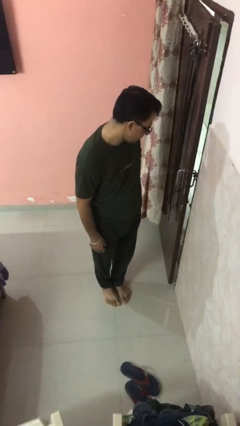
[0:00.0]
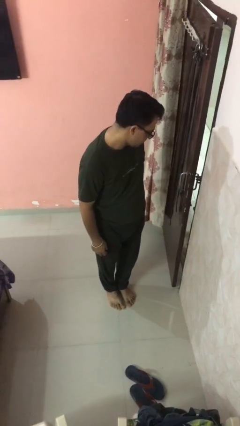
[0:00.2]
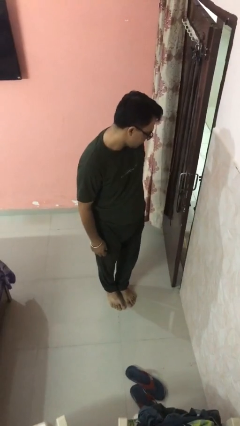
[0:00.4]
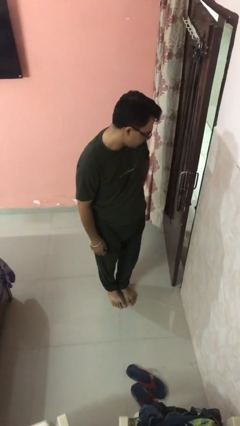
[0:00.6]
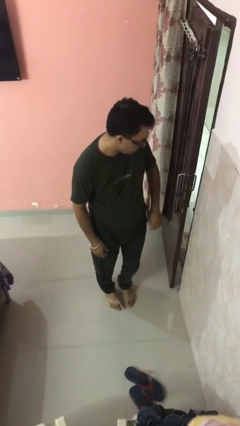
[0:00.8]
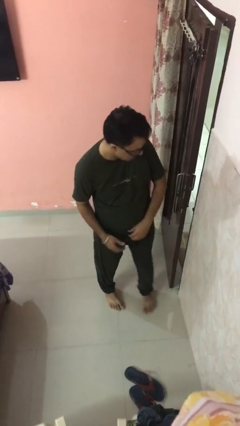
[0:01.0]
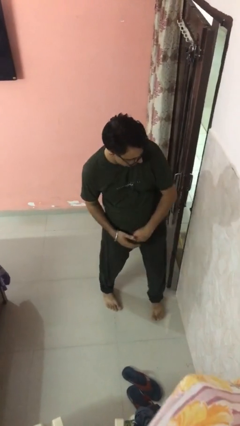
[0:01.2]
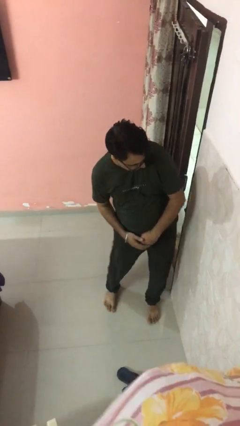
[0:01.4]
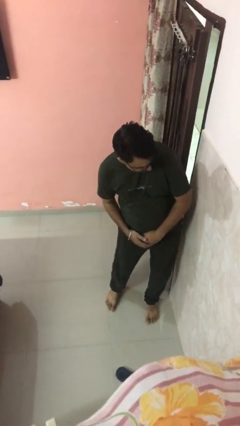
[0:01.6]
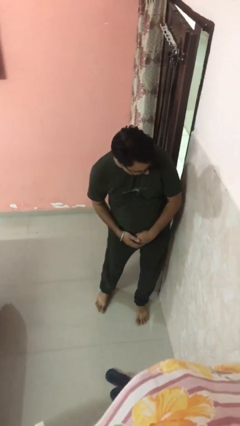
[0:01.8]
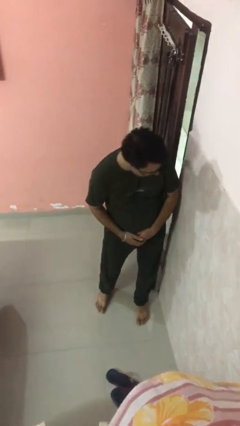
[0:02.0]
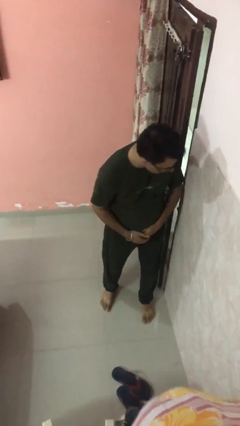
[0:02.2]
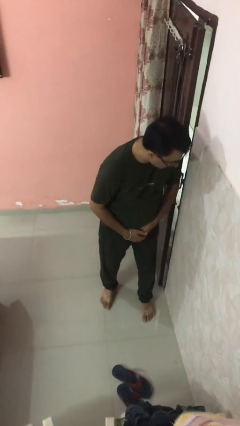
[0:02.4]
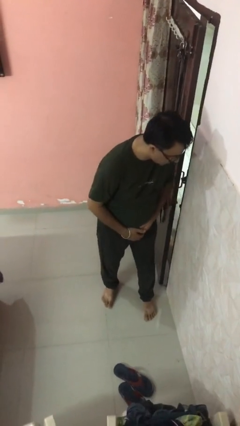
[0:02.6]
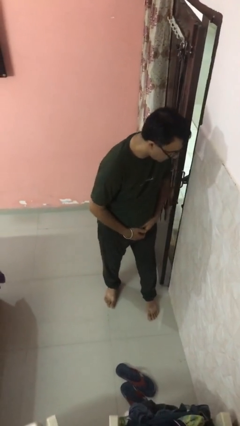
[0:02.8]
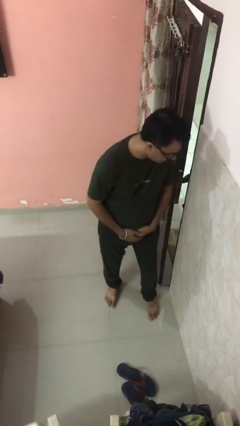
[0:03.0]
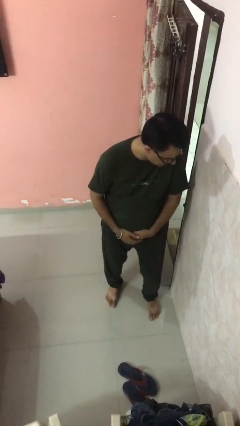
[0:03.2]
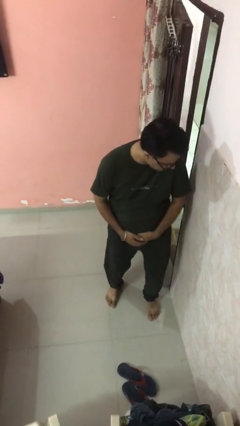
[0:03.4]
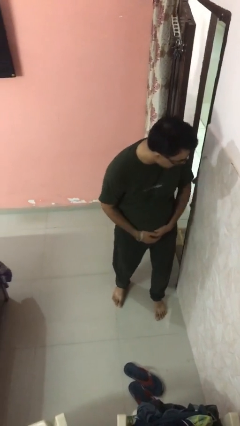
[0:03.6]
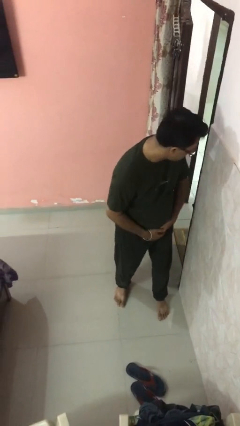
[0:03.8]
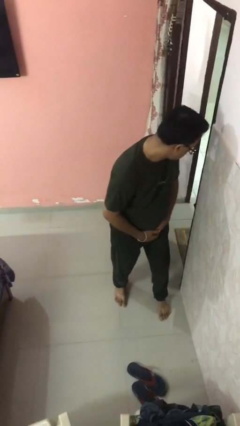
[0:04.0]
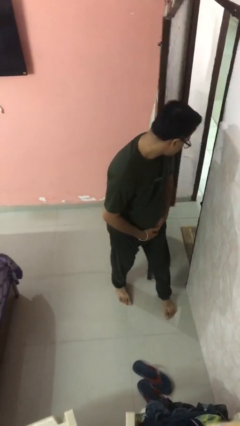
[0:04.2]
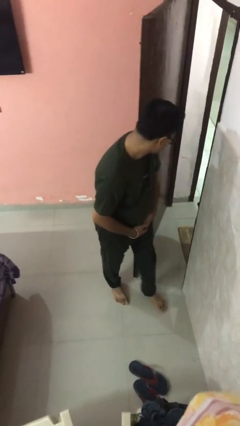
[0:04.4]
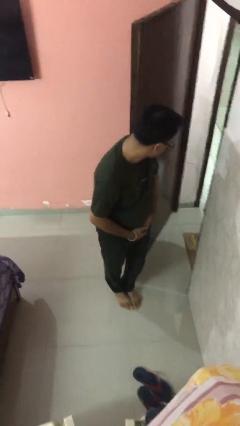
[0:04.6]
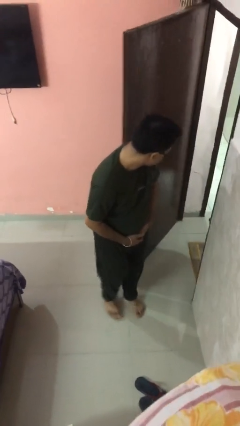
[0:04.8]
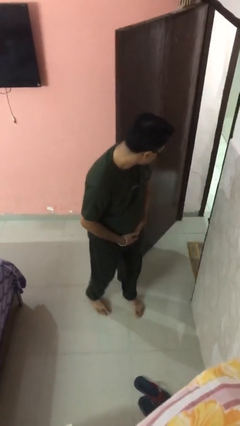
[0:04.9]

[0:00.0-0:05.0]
person opens facility door

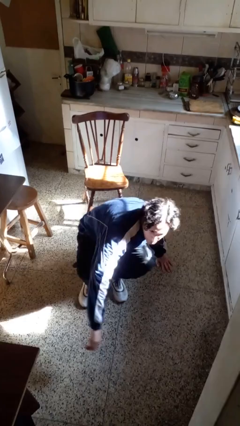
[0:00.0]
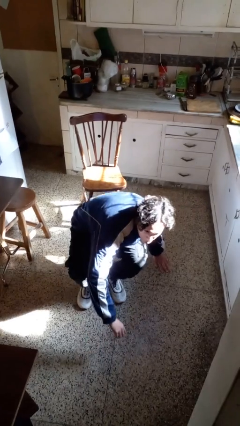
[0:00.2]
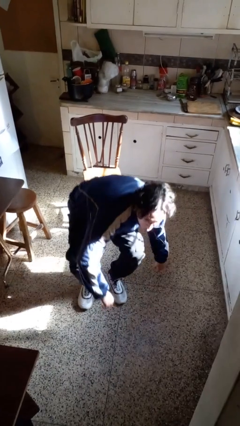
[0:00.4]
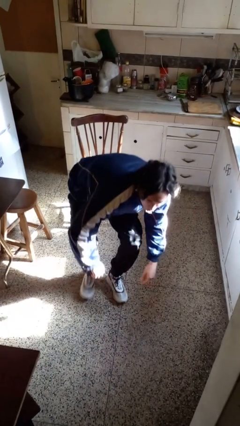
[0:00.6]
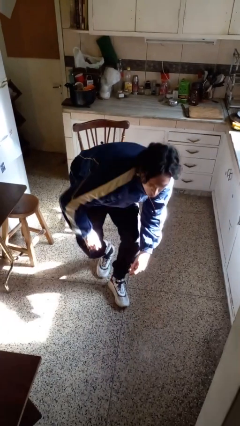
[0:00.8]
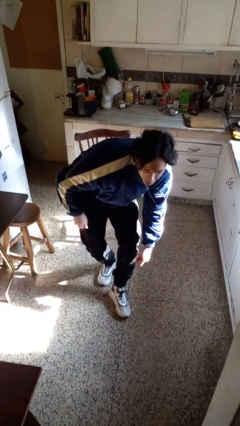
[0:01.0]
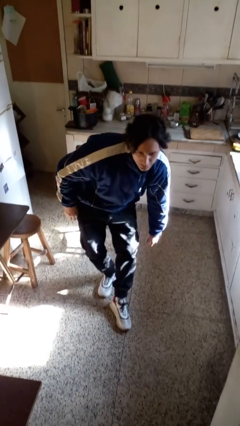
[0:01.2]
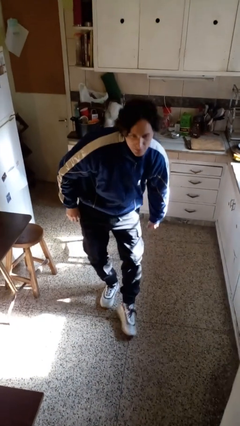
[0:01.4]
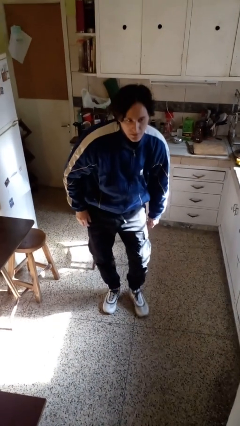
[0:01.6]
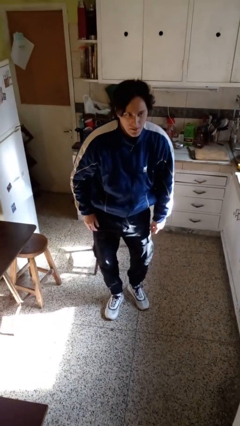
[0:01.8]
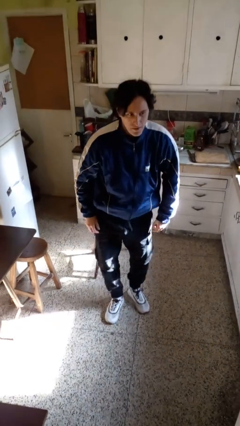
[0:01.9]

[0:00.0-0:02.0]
person stands up from floor

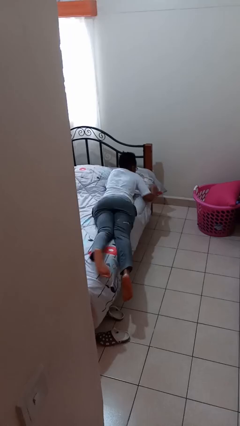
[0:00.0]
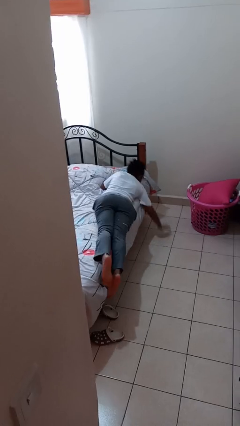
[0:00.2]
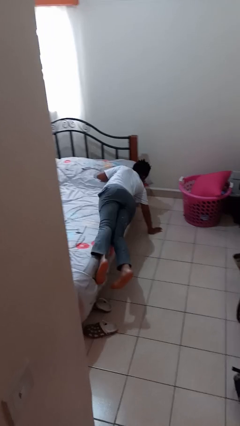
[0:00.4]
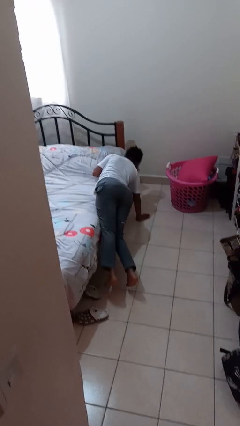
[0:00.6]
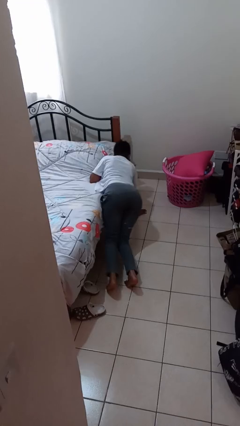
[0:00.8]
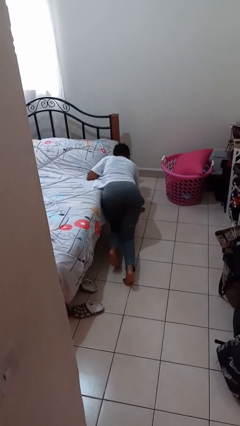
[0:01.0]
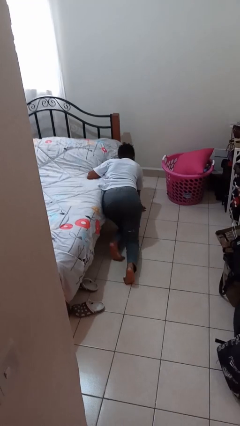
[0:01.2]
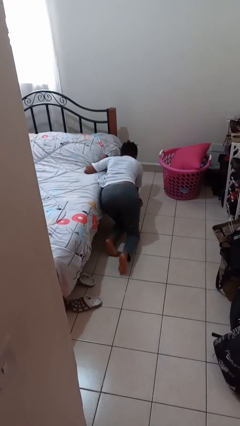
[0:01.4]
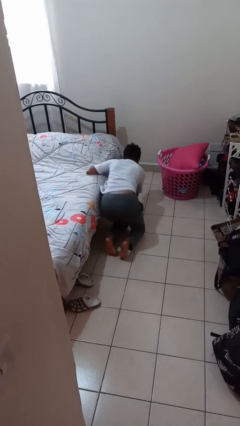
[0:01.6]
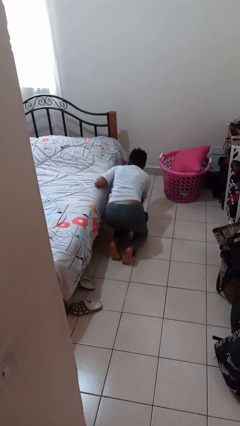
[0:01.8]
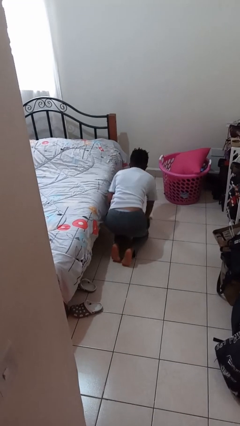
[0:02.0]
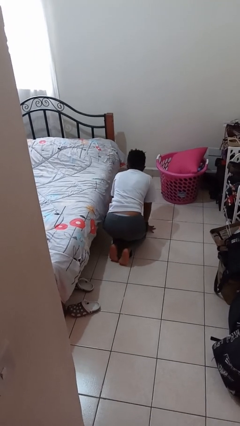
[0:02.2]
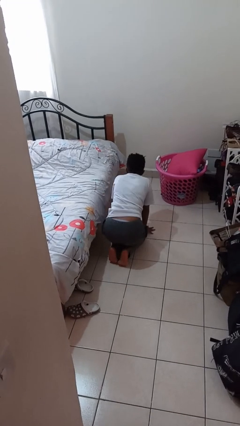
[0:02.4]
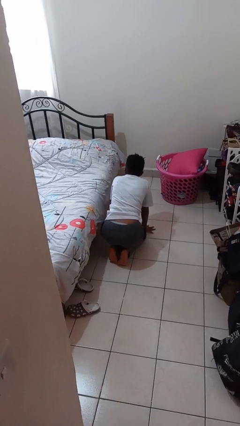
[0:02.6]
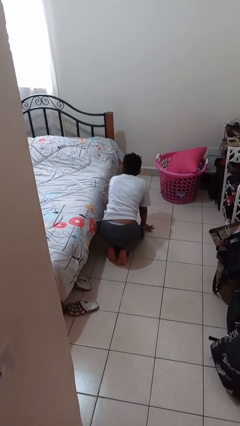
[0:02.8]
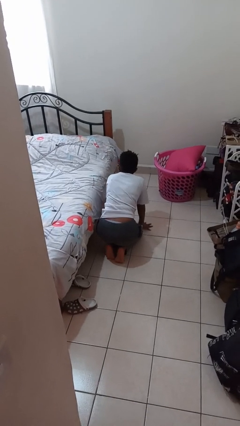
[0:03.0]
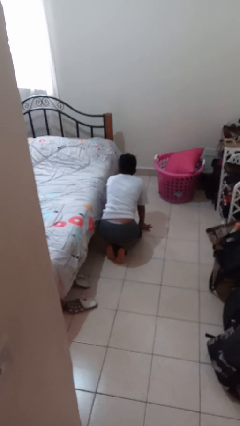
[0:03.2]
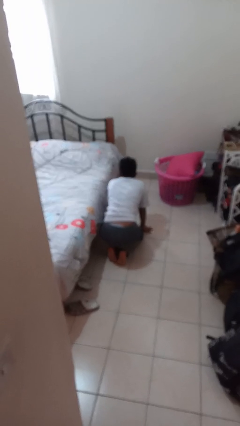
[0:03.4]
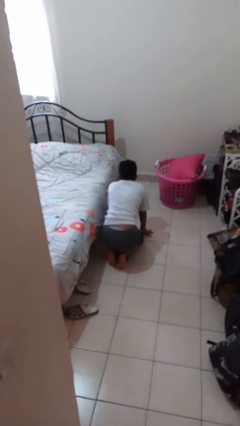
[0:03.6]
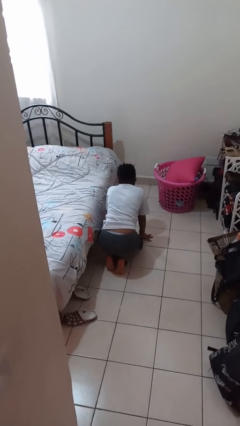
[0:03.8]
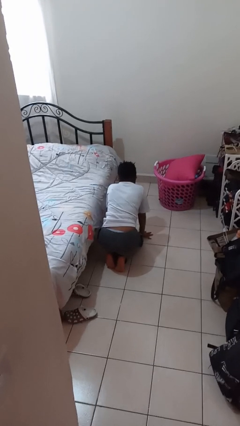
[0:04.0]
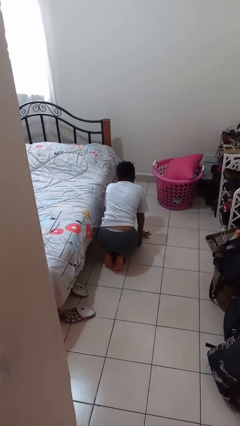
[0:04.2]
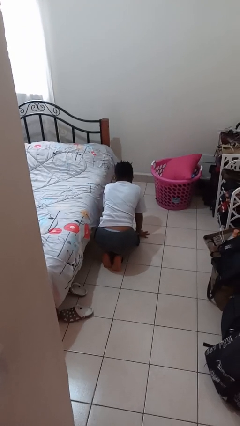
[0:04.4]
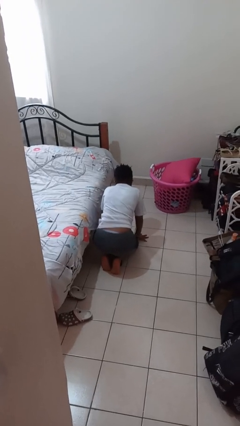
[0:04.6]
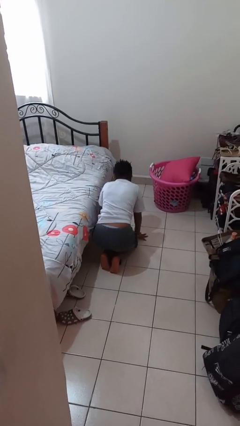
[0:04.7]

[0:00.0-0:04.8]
person falls from bed

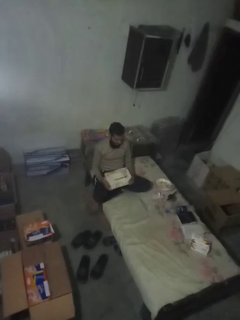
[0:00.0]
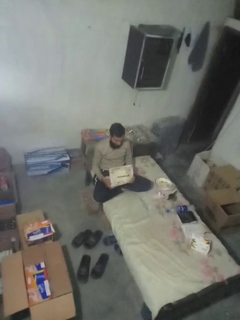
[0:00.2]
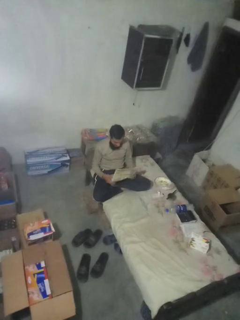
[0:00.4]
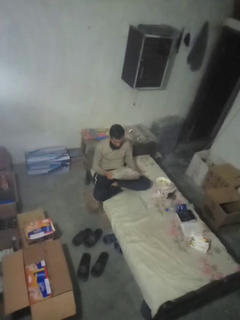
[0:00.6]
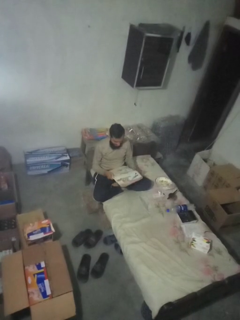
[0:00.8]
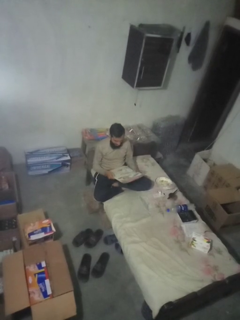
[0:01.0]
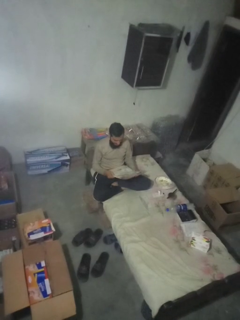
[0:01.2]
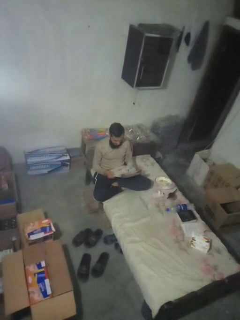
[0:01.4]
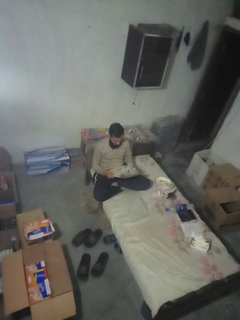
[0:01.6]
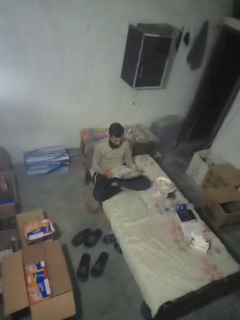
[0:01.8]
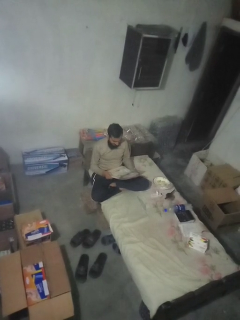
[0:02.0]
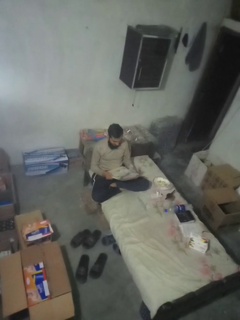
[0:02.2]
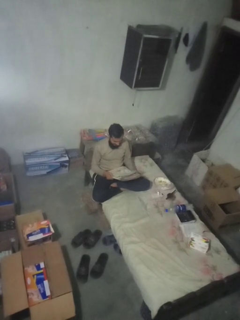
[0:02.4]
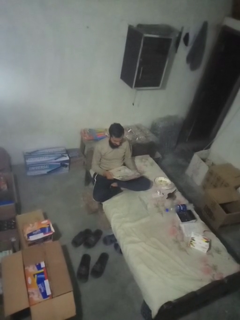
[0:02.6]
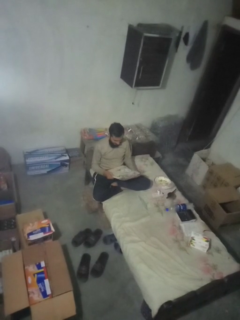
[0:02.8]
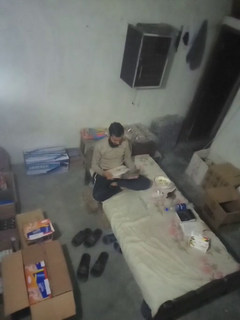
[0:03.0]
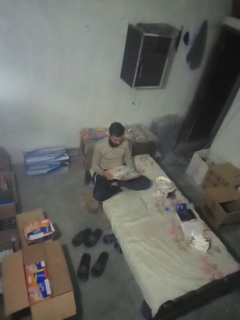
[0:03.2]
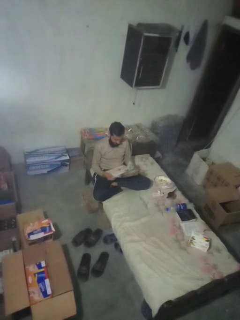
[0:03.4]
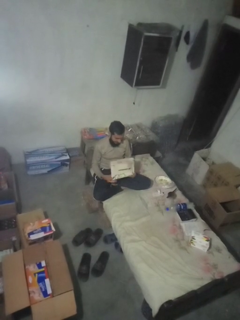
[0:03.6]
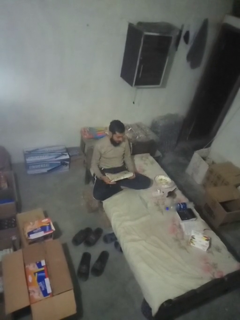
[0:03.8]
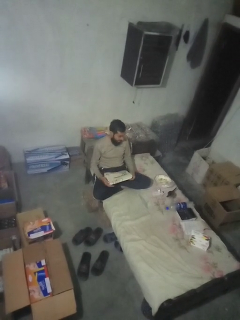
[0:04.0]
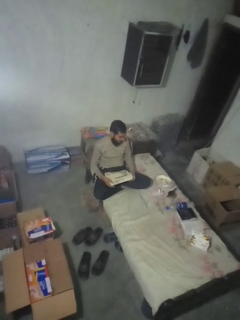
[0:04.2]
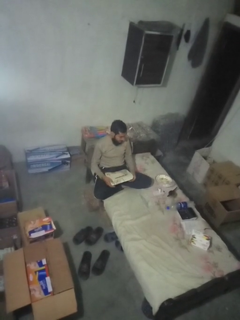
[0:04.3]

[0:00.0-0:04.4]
person reads magazine

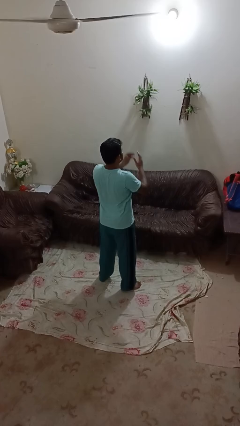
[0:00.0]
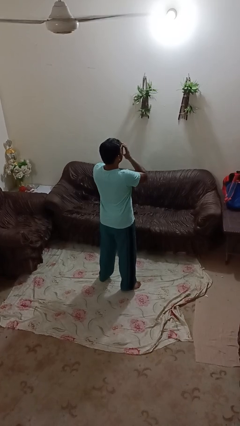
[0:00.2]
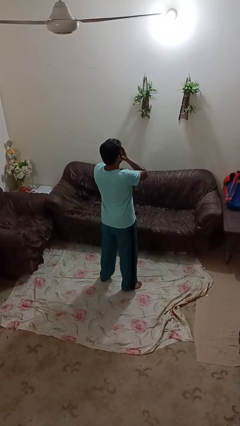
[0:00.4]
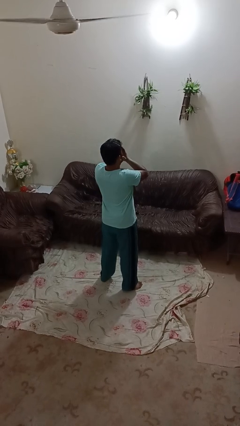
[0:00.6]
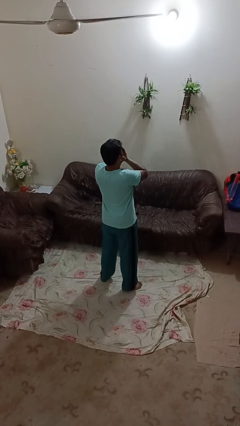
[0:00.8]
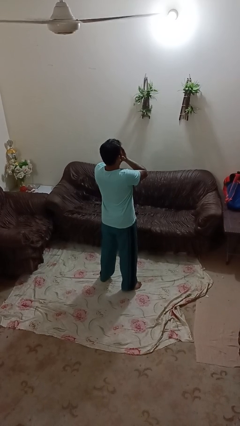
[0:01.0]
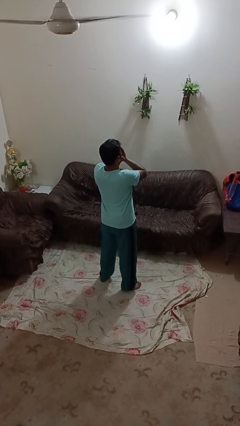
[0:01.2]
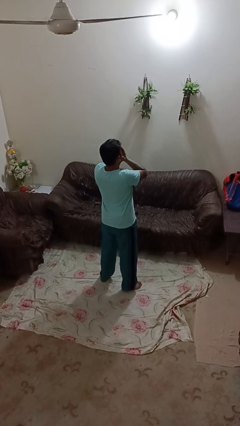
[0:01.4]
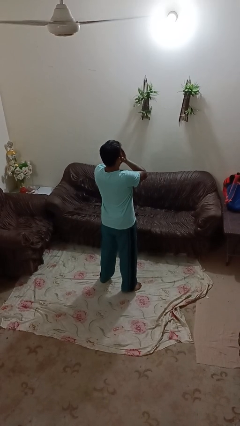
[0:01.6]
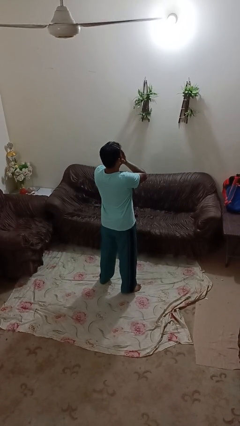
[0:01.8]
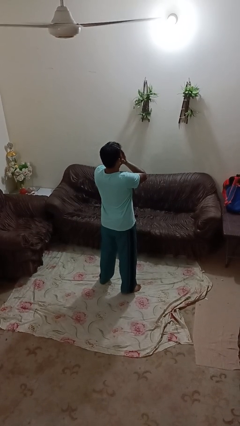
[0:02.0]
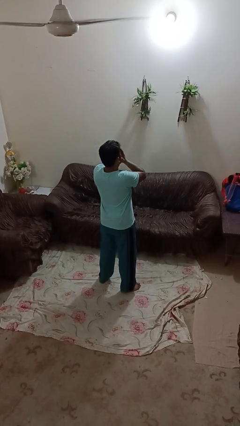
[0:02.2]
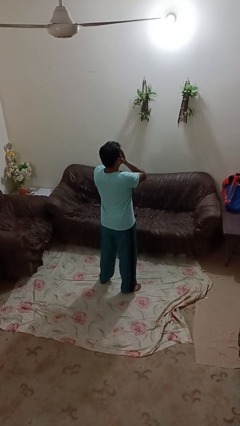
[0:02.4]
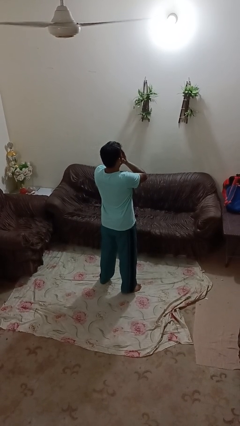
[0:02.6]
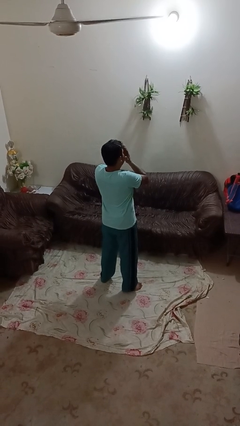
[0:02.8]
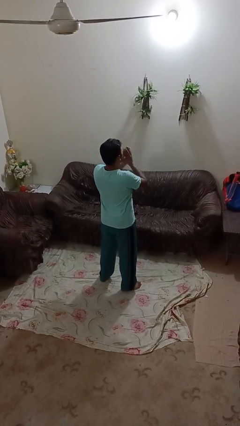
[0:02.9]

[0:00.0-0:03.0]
person covers face with hands
